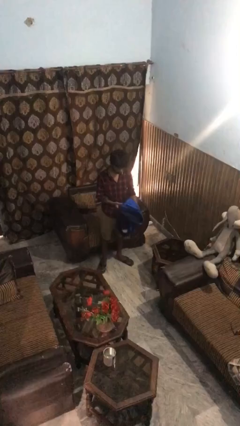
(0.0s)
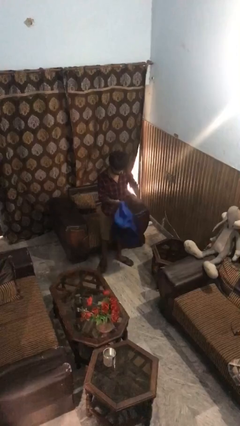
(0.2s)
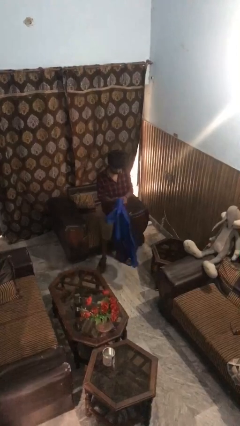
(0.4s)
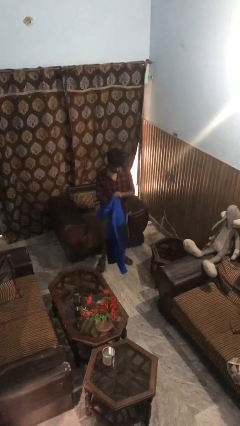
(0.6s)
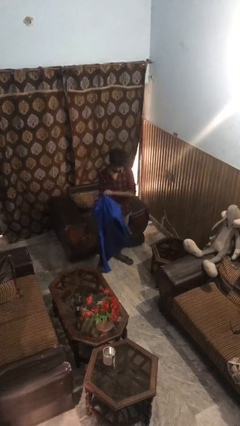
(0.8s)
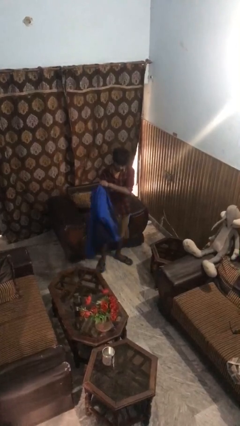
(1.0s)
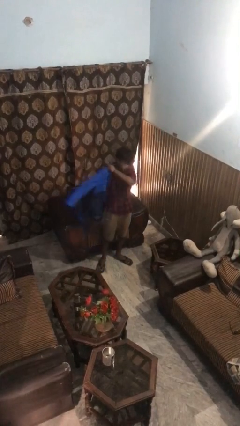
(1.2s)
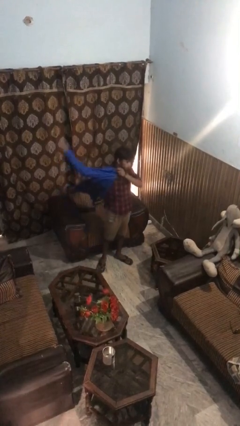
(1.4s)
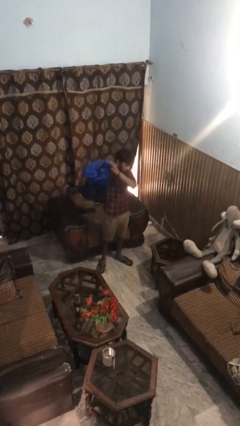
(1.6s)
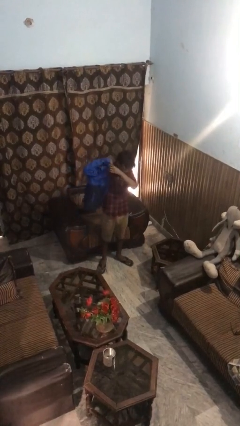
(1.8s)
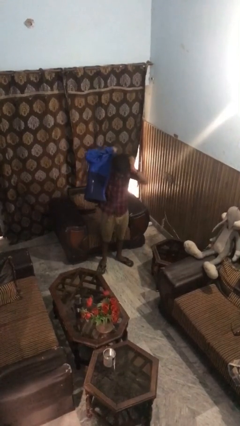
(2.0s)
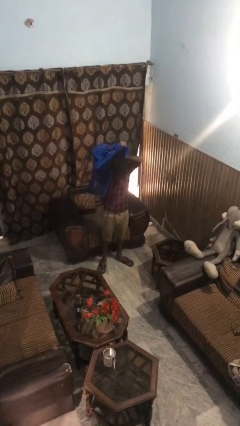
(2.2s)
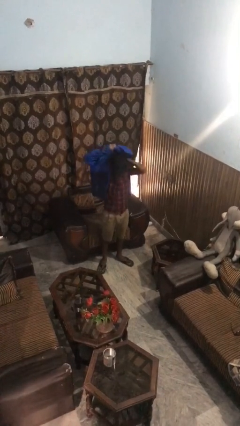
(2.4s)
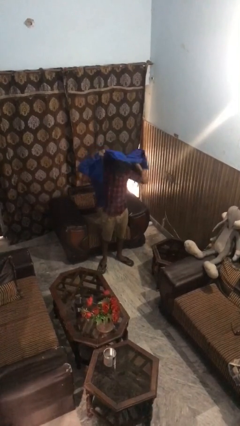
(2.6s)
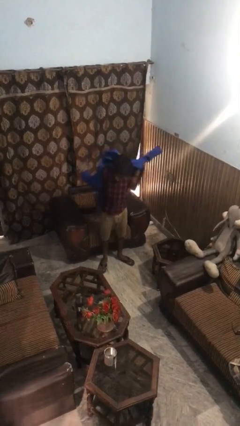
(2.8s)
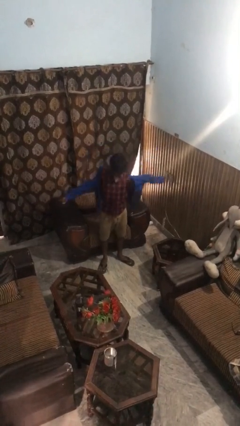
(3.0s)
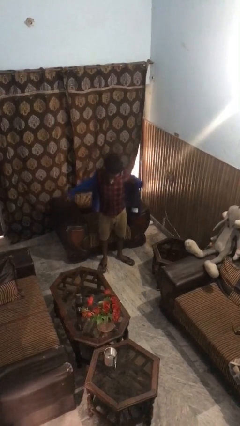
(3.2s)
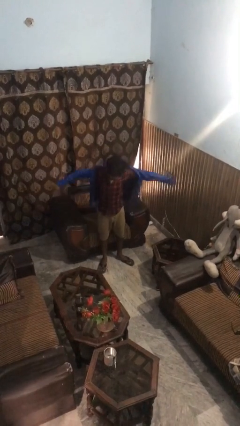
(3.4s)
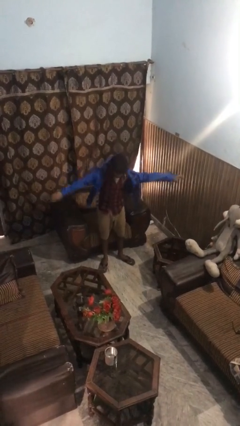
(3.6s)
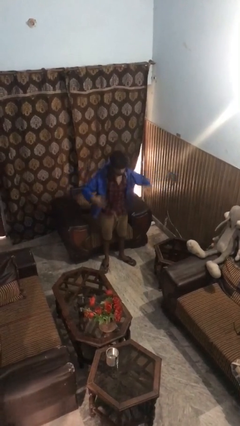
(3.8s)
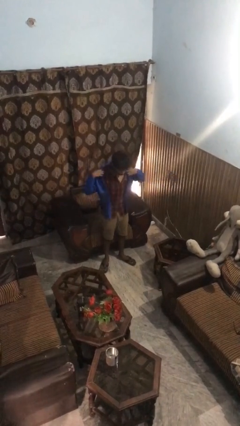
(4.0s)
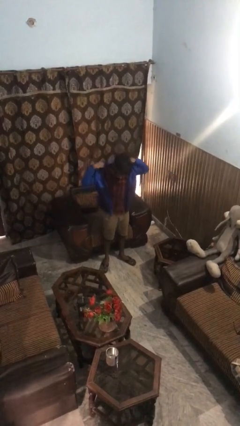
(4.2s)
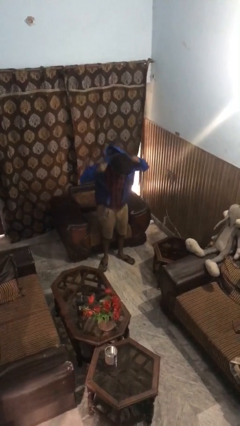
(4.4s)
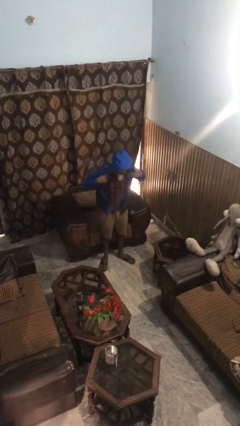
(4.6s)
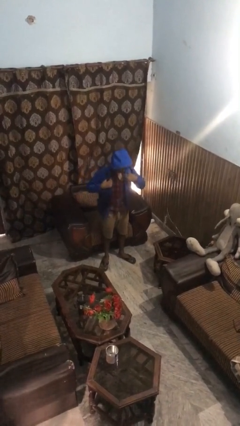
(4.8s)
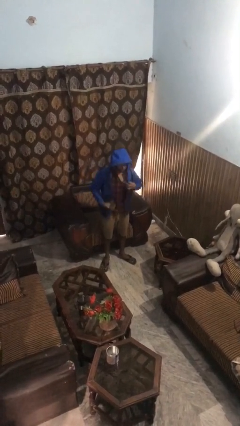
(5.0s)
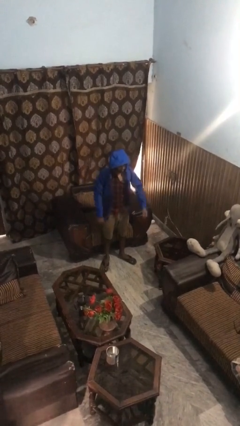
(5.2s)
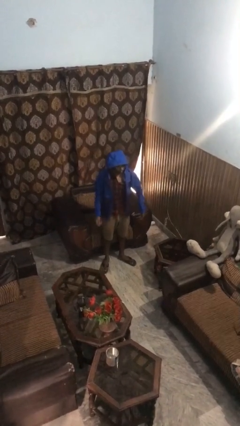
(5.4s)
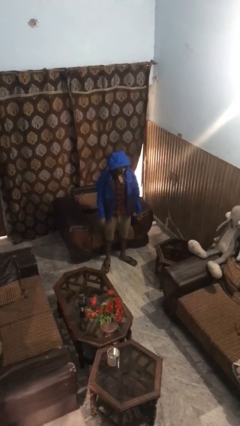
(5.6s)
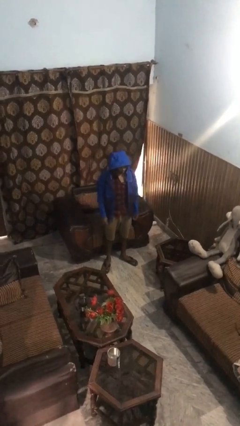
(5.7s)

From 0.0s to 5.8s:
person puts on hoodie

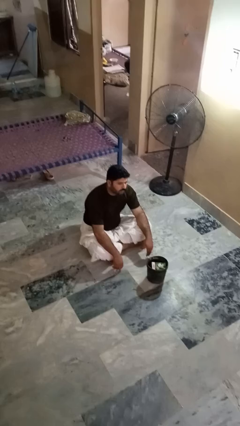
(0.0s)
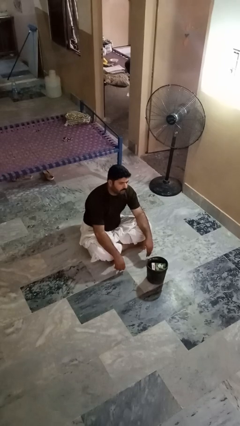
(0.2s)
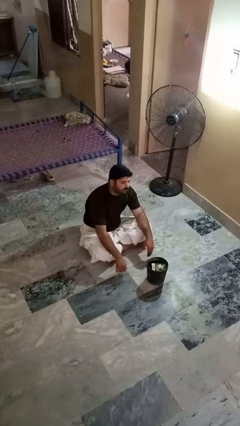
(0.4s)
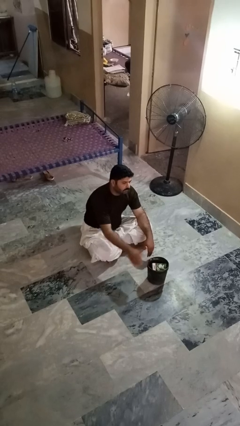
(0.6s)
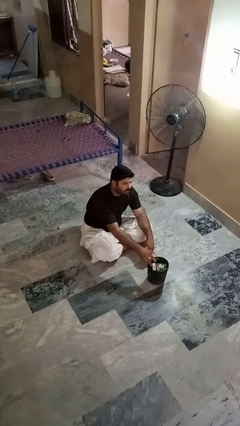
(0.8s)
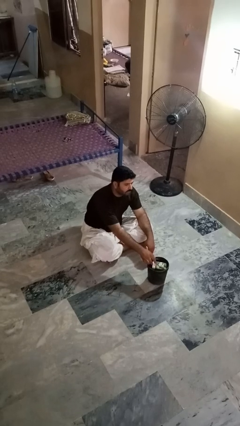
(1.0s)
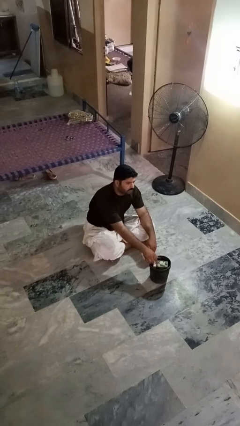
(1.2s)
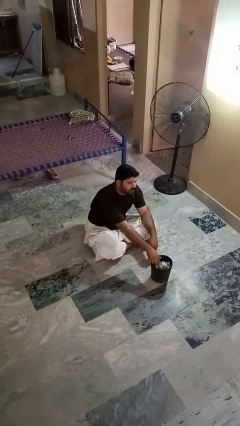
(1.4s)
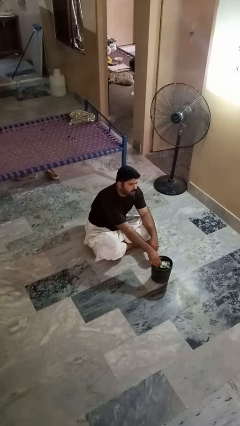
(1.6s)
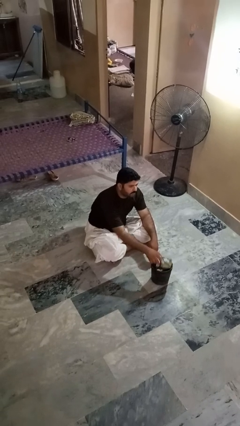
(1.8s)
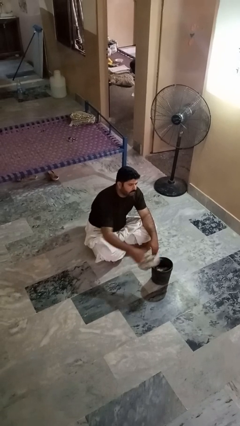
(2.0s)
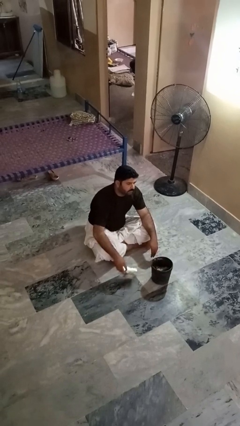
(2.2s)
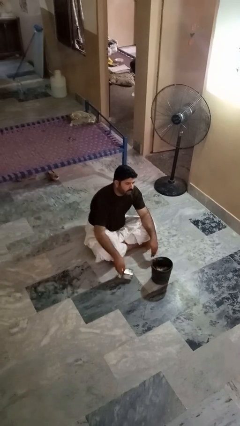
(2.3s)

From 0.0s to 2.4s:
person takes object from basket

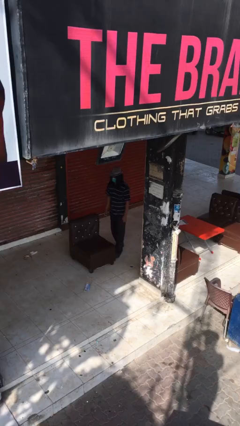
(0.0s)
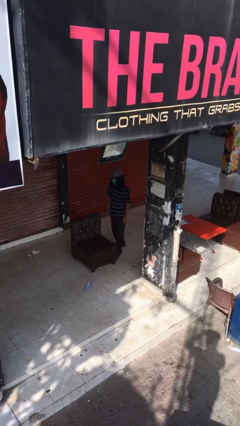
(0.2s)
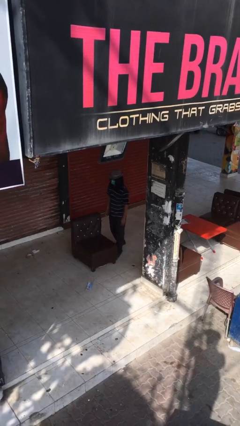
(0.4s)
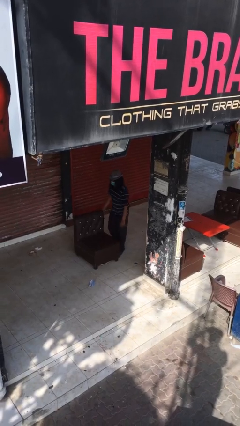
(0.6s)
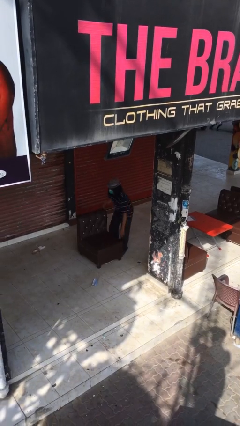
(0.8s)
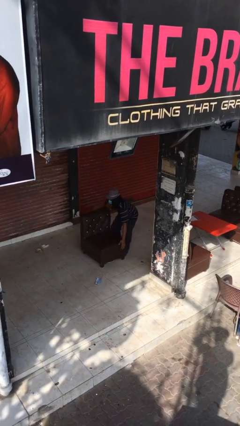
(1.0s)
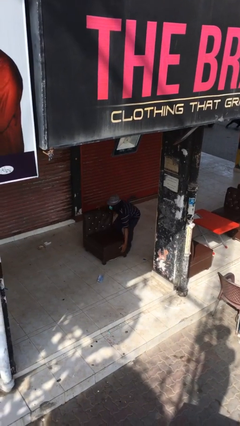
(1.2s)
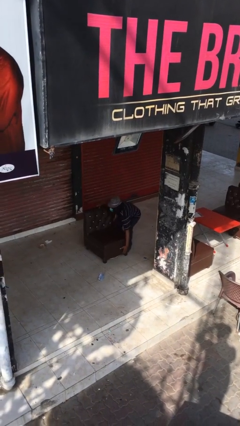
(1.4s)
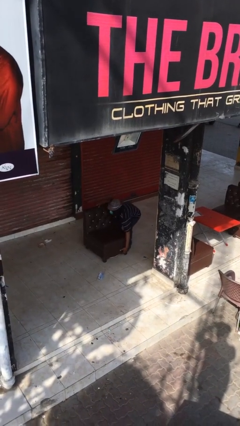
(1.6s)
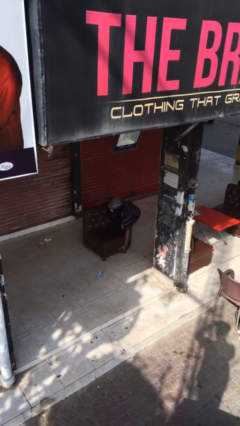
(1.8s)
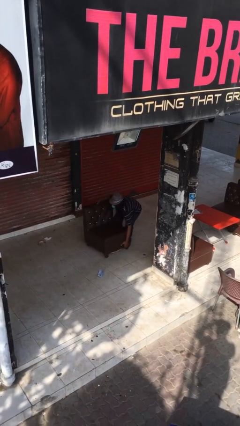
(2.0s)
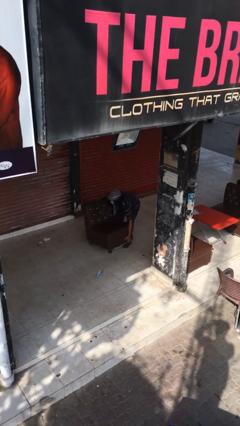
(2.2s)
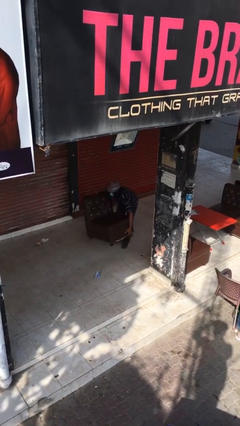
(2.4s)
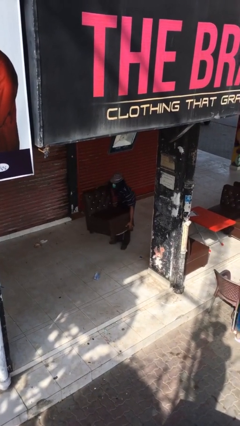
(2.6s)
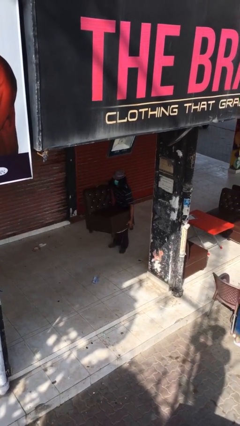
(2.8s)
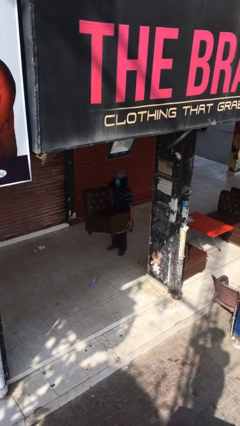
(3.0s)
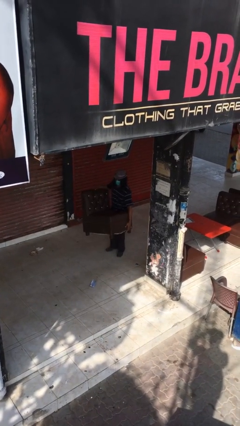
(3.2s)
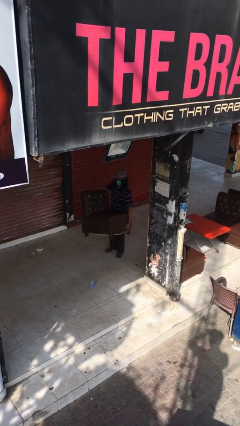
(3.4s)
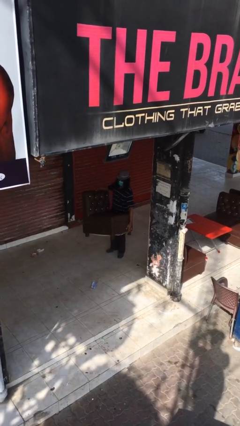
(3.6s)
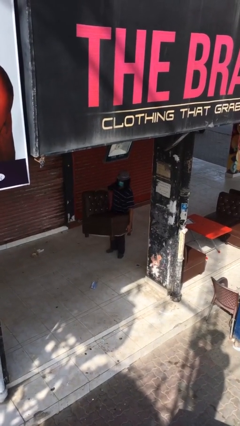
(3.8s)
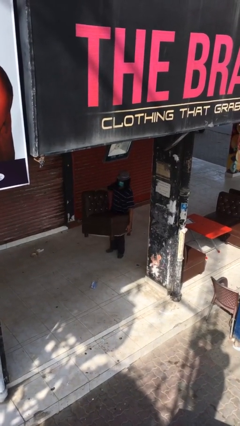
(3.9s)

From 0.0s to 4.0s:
person picks up object from floor

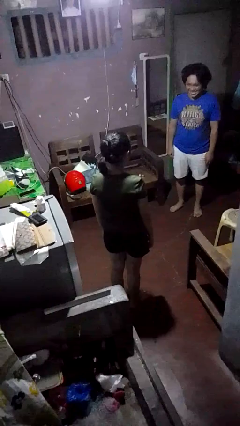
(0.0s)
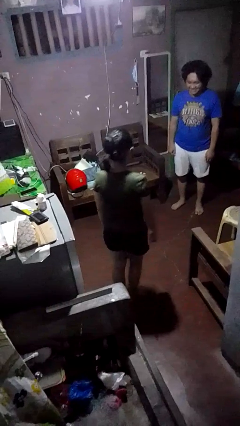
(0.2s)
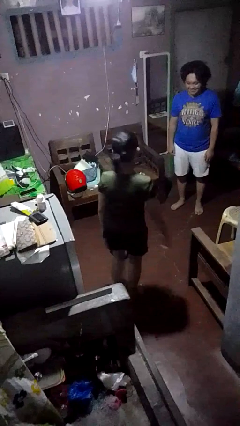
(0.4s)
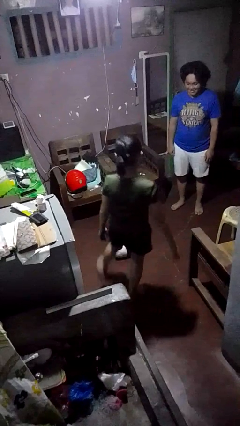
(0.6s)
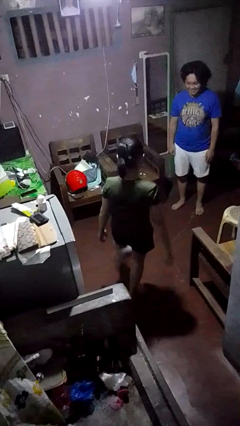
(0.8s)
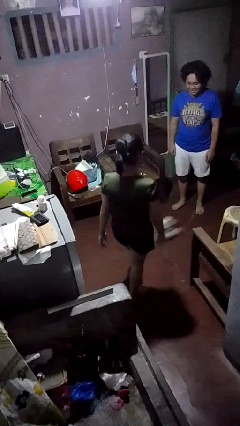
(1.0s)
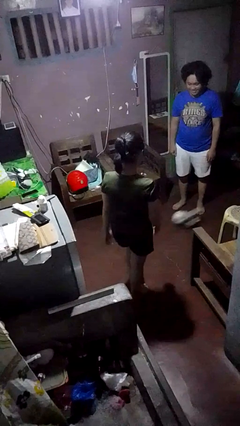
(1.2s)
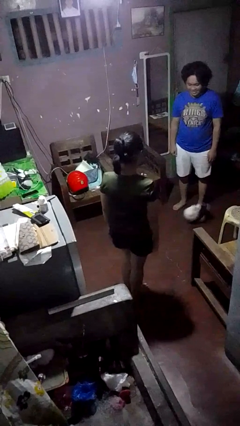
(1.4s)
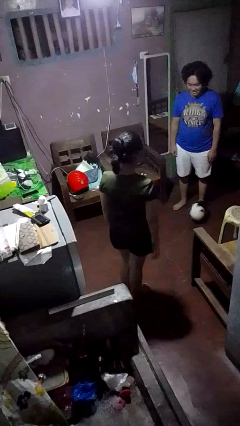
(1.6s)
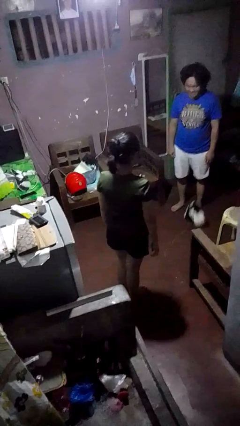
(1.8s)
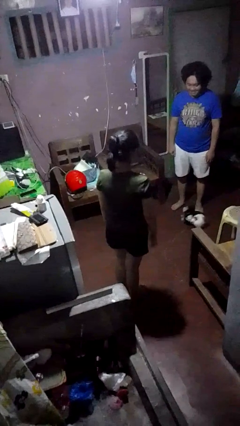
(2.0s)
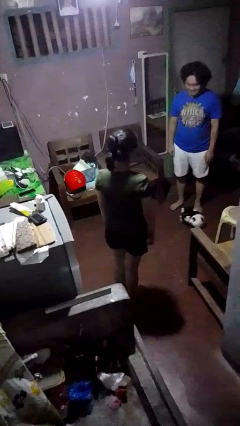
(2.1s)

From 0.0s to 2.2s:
person kicks object to person

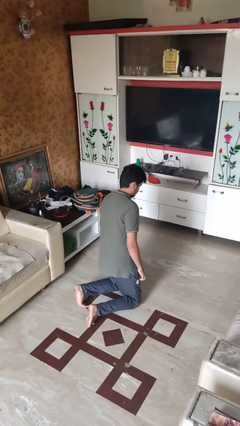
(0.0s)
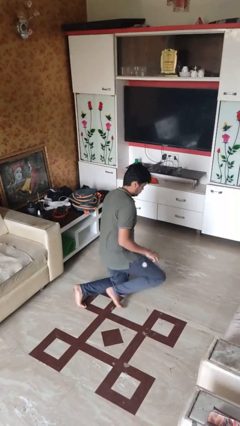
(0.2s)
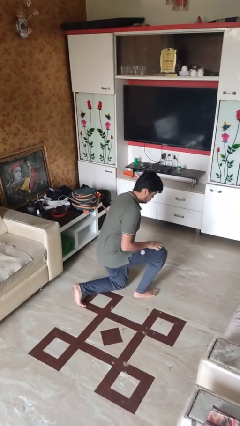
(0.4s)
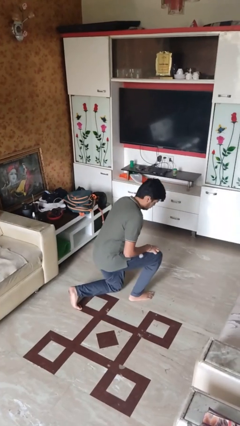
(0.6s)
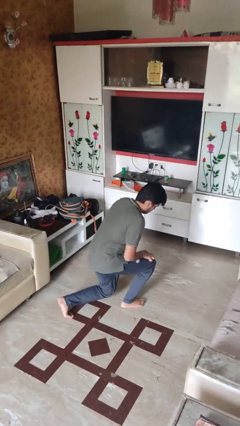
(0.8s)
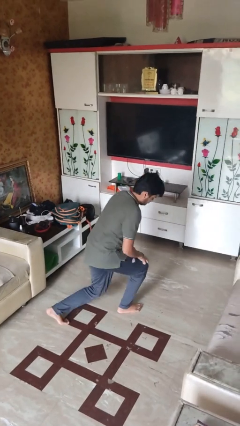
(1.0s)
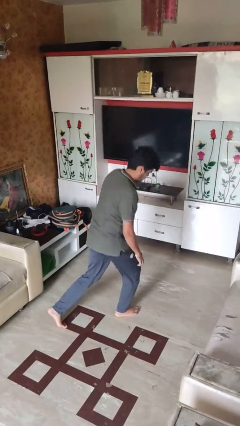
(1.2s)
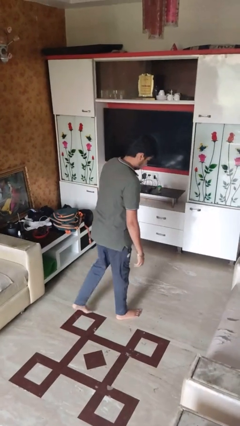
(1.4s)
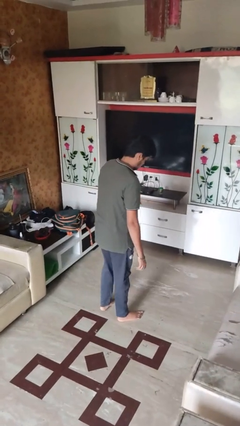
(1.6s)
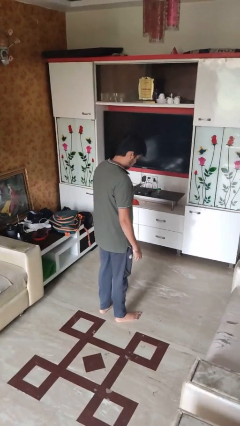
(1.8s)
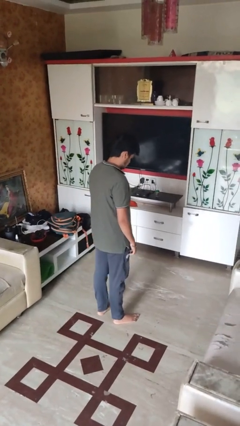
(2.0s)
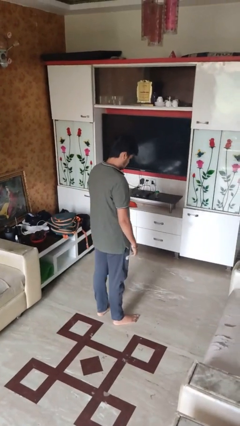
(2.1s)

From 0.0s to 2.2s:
person stands up from floor

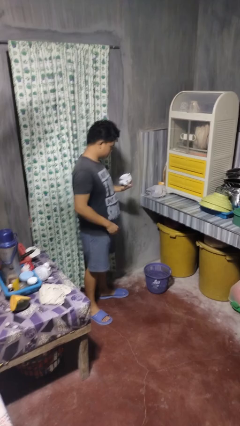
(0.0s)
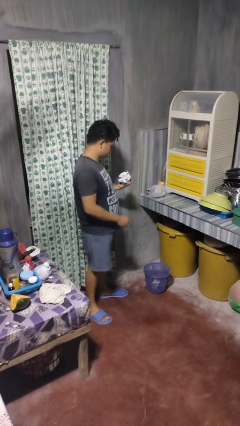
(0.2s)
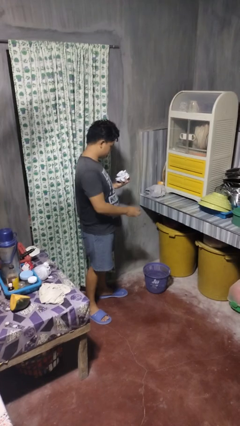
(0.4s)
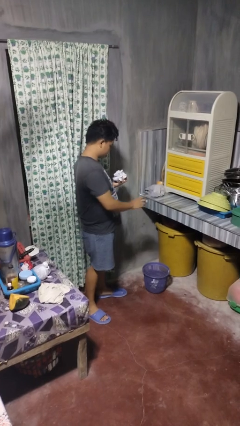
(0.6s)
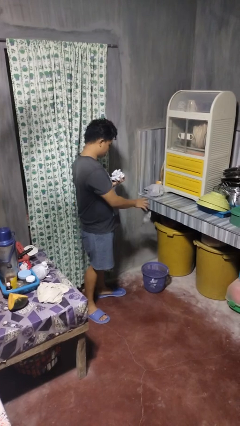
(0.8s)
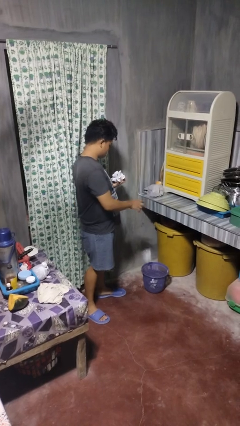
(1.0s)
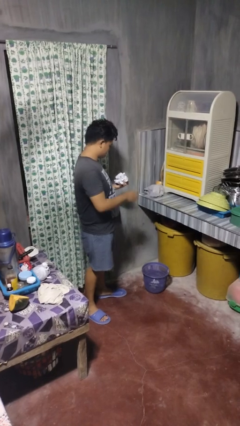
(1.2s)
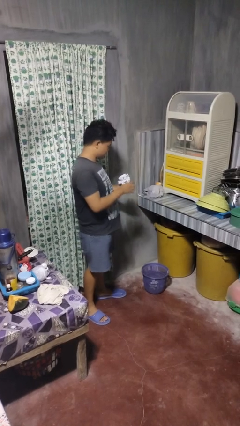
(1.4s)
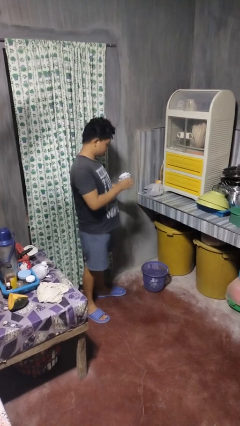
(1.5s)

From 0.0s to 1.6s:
person discards trash
